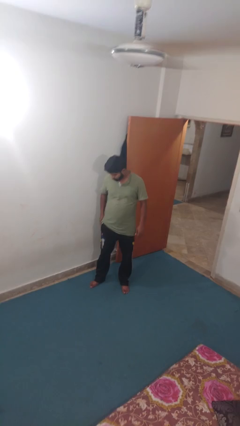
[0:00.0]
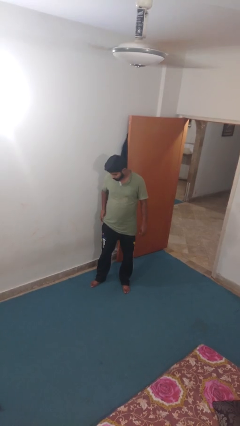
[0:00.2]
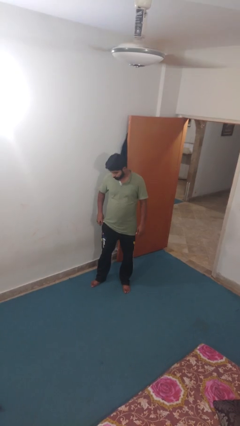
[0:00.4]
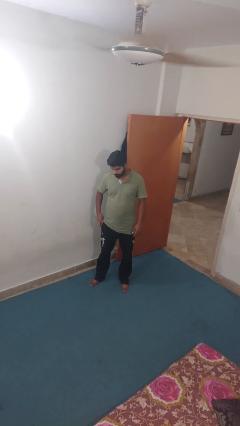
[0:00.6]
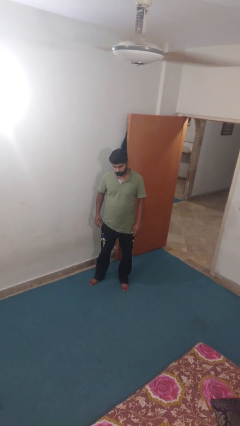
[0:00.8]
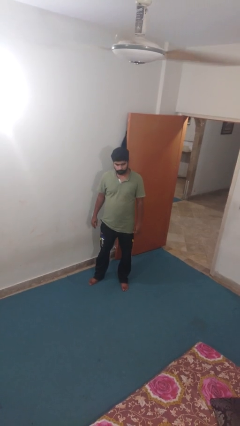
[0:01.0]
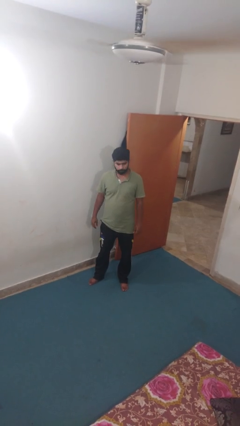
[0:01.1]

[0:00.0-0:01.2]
person puts phone into pocket

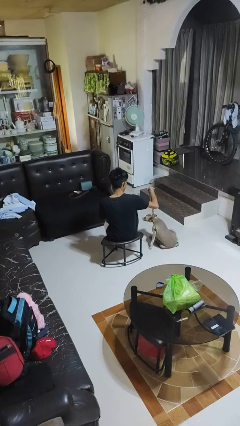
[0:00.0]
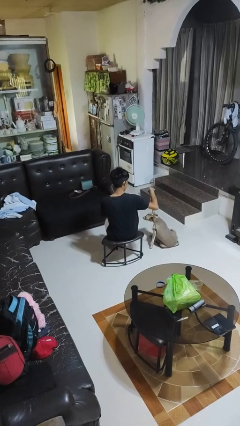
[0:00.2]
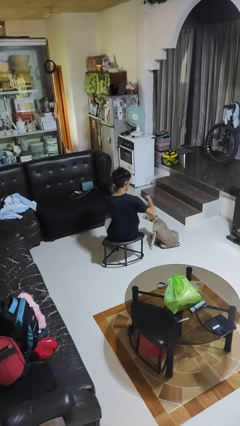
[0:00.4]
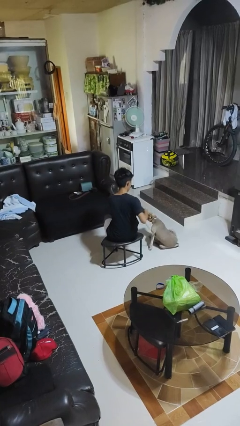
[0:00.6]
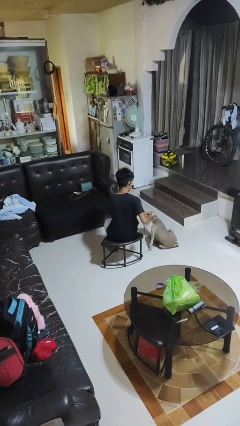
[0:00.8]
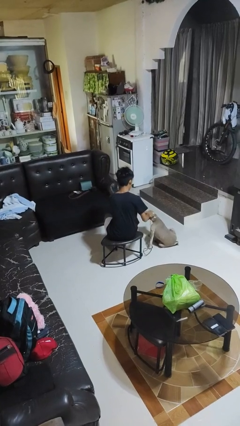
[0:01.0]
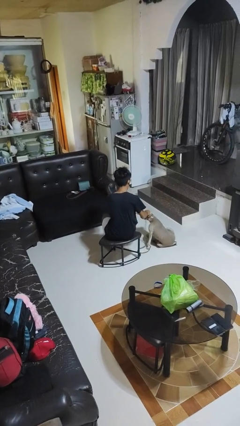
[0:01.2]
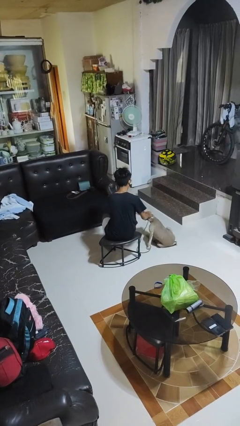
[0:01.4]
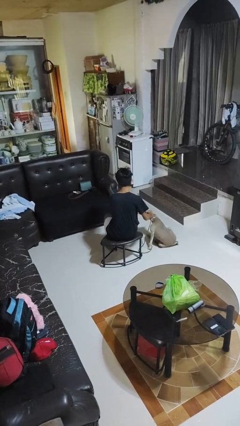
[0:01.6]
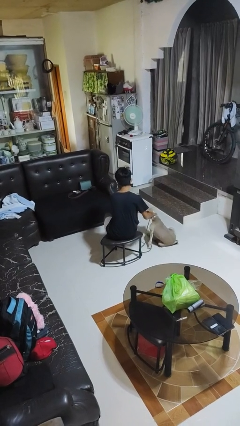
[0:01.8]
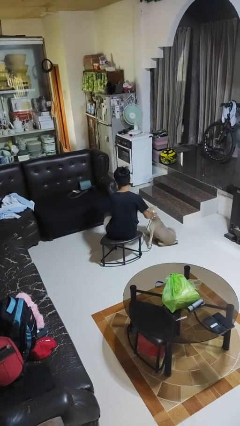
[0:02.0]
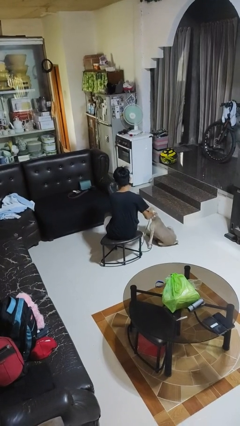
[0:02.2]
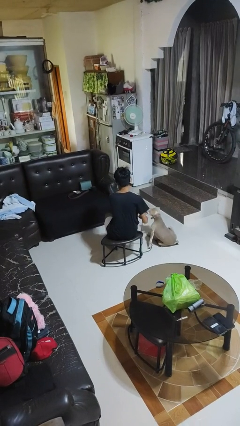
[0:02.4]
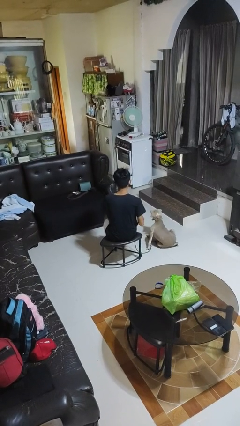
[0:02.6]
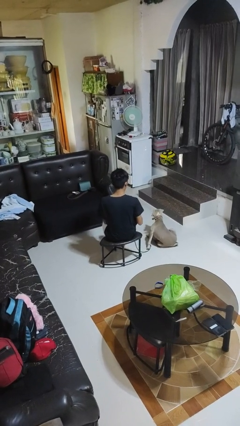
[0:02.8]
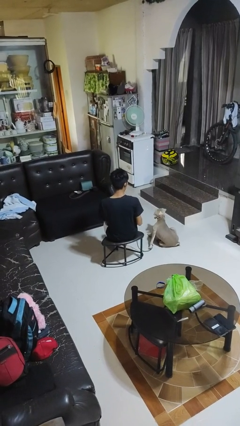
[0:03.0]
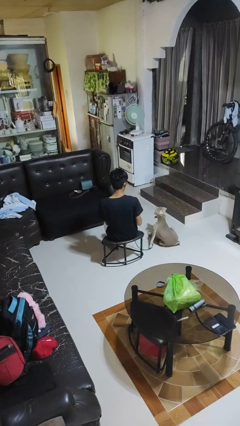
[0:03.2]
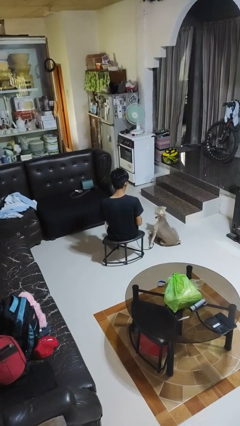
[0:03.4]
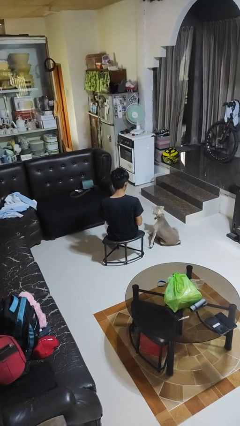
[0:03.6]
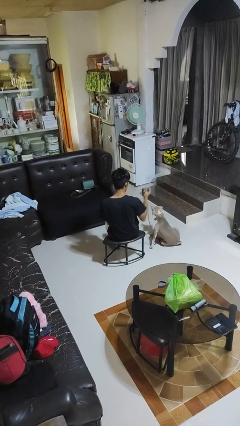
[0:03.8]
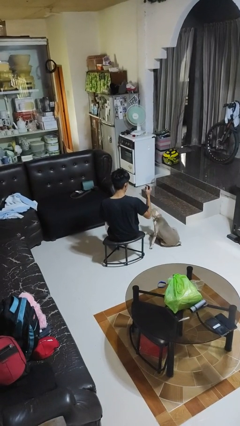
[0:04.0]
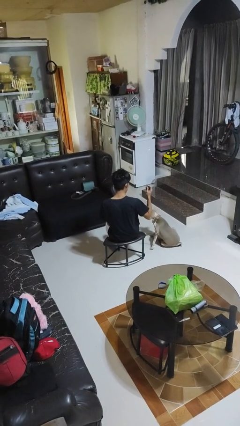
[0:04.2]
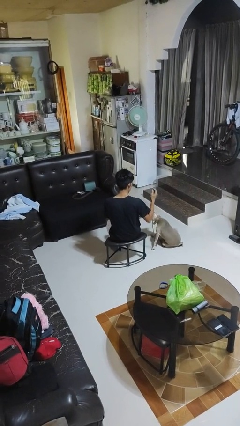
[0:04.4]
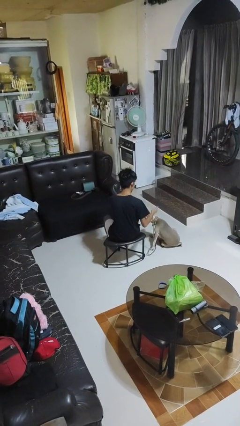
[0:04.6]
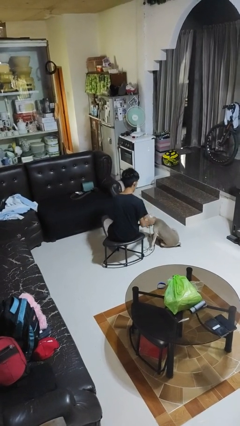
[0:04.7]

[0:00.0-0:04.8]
person unattaches leash from dog

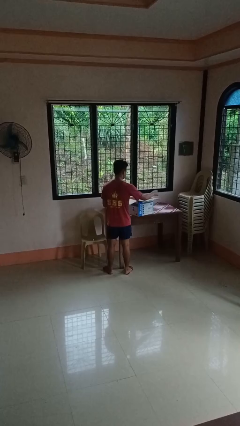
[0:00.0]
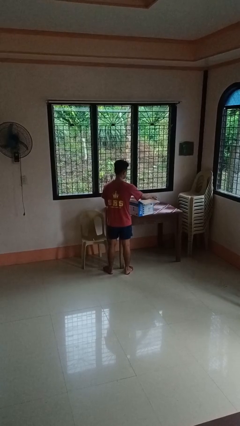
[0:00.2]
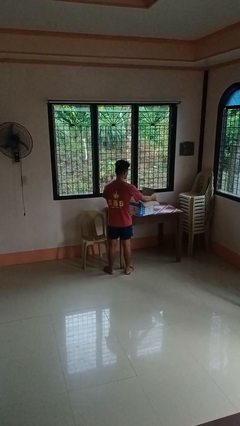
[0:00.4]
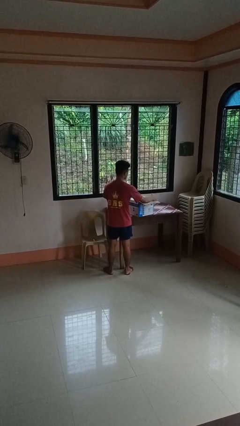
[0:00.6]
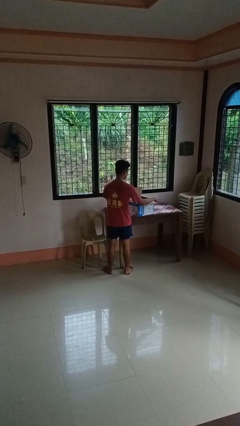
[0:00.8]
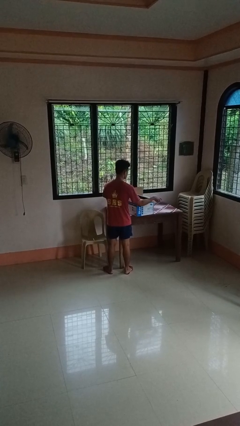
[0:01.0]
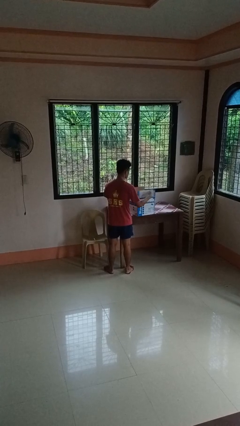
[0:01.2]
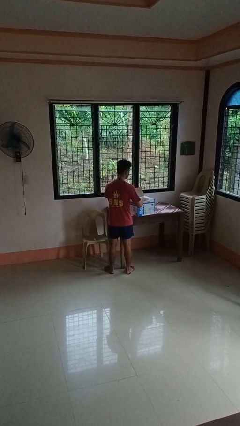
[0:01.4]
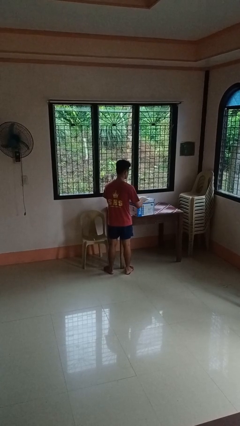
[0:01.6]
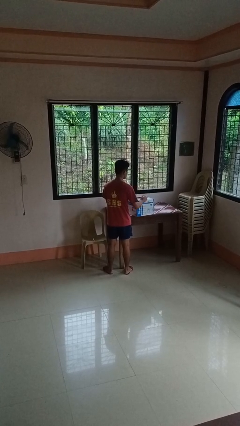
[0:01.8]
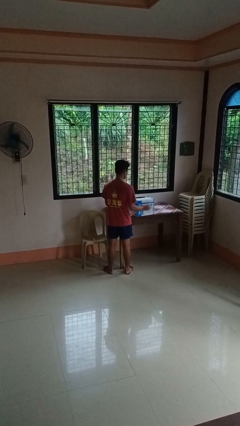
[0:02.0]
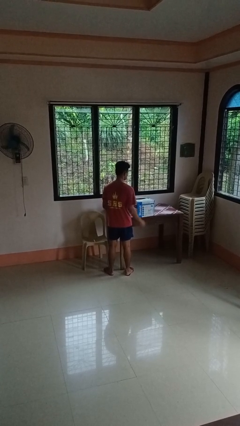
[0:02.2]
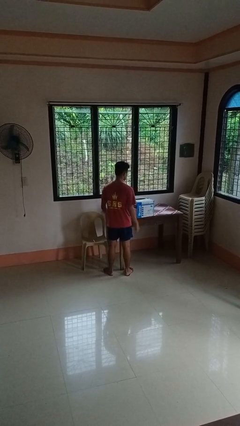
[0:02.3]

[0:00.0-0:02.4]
person closes box

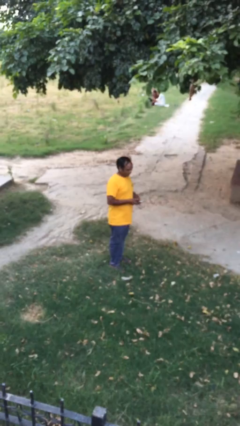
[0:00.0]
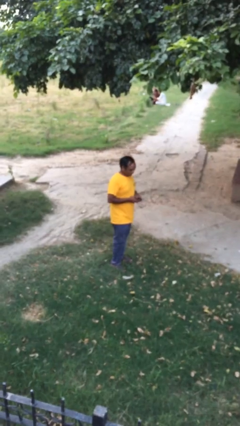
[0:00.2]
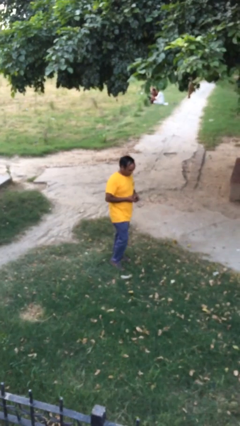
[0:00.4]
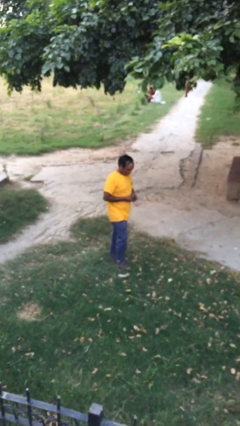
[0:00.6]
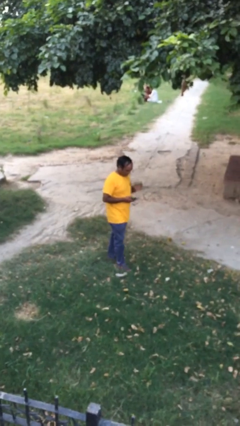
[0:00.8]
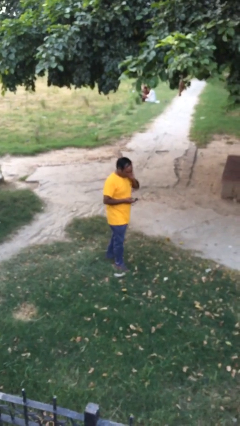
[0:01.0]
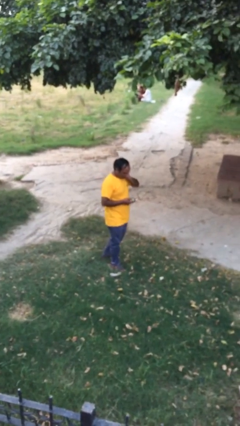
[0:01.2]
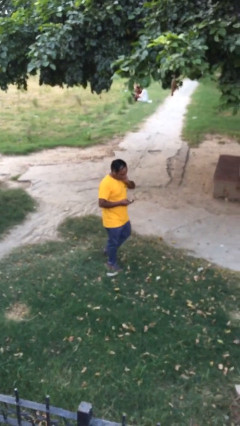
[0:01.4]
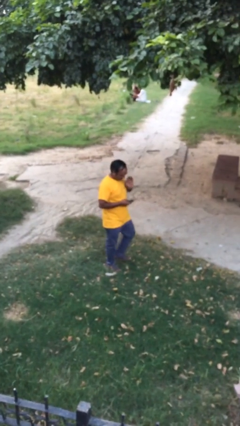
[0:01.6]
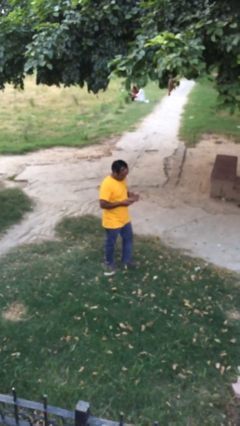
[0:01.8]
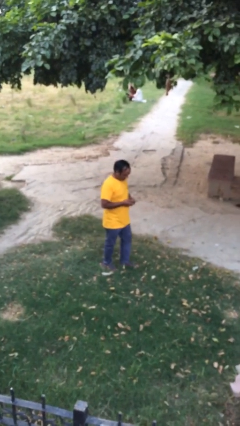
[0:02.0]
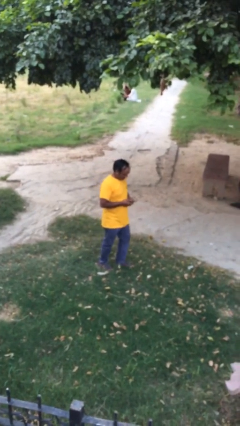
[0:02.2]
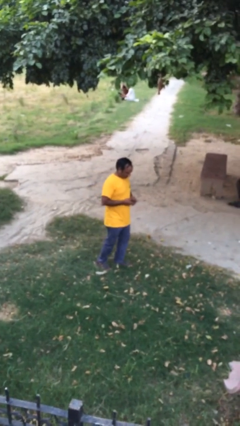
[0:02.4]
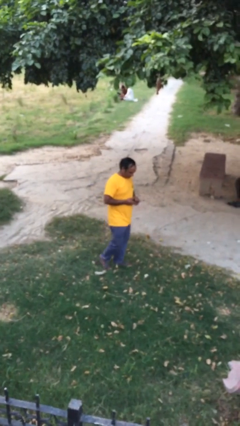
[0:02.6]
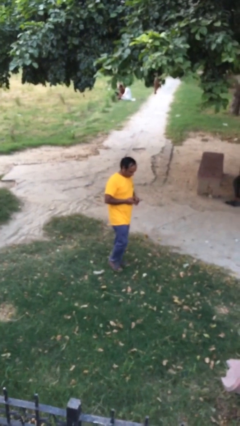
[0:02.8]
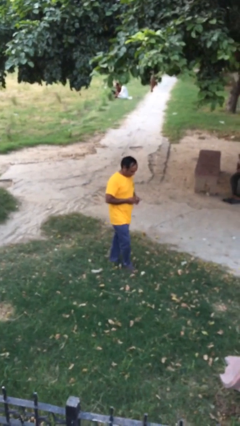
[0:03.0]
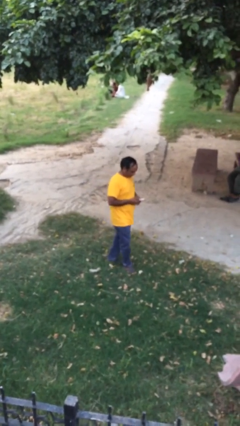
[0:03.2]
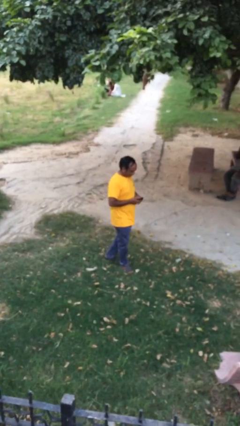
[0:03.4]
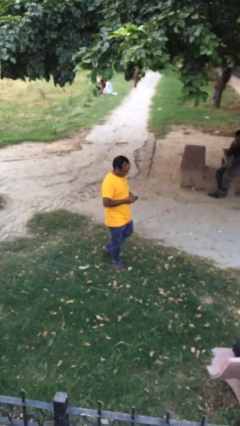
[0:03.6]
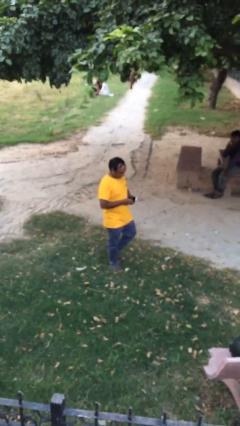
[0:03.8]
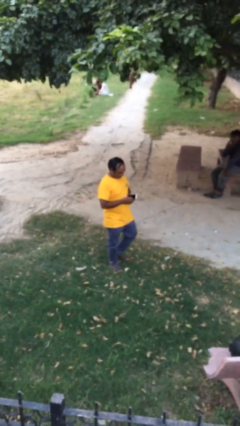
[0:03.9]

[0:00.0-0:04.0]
person texts on phone

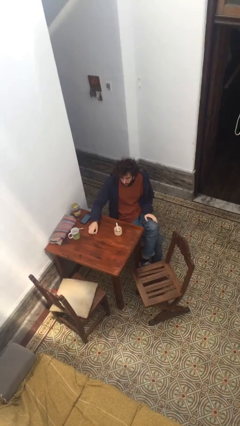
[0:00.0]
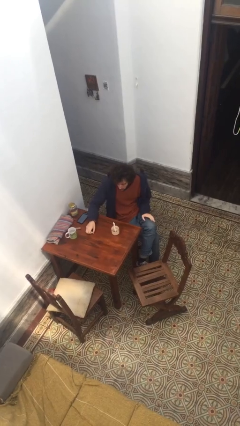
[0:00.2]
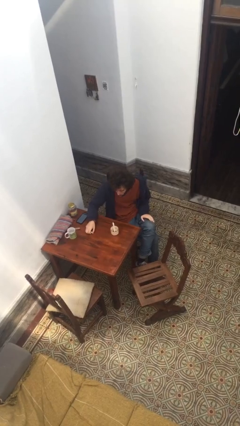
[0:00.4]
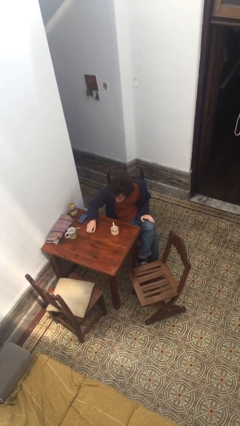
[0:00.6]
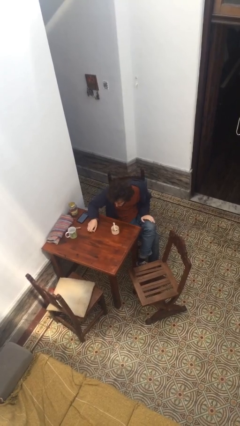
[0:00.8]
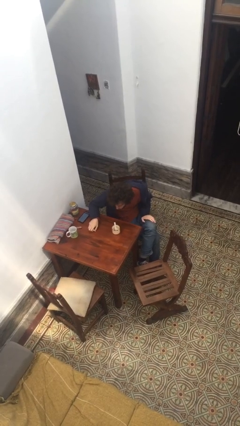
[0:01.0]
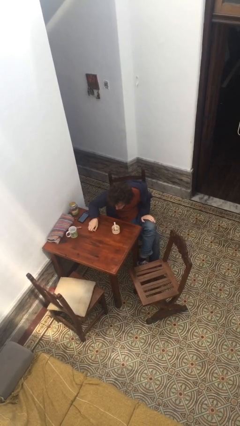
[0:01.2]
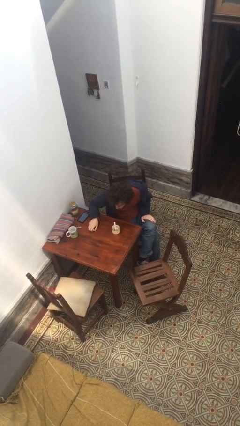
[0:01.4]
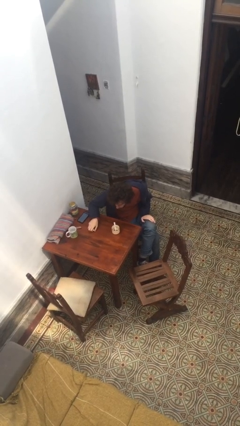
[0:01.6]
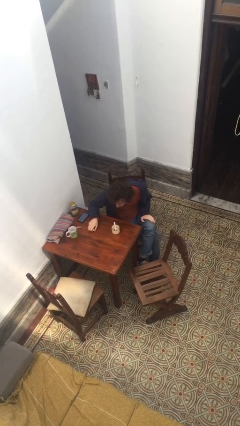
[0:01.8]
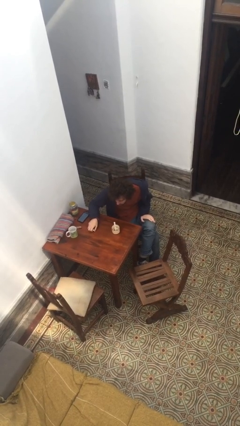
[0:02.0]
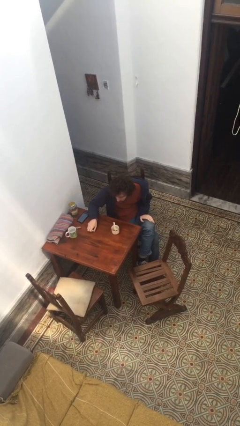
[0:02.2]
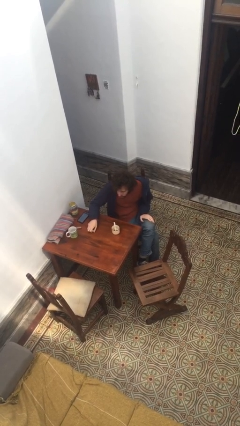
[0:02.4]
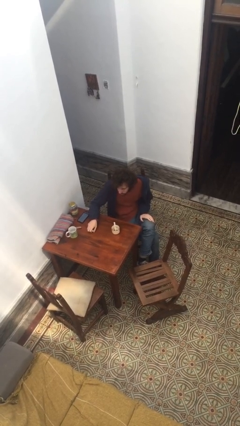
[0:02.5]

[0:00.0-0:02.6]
person extinguishes candle

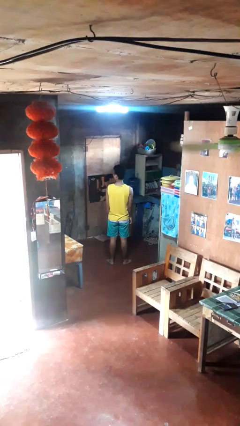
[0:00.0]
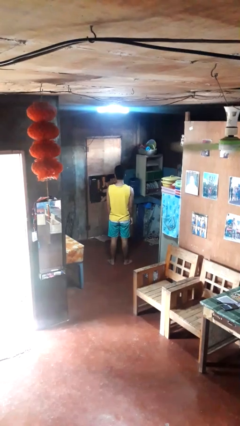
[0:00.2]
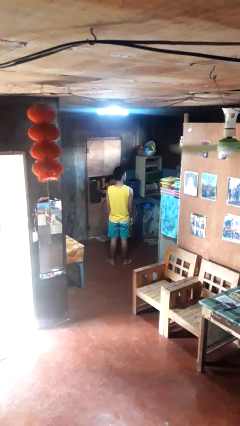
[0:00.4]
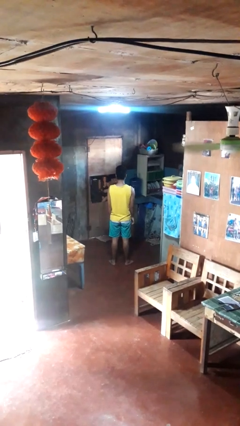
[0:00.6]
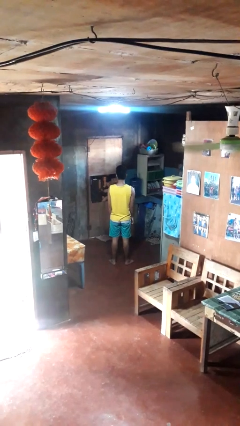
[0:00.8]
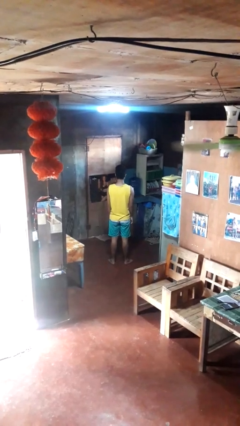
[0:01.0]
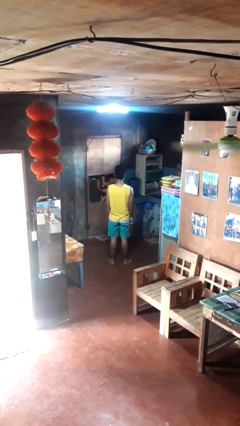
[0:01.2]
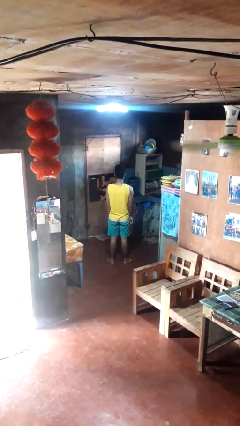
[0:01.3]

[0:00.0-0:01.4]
person shakes head

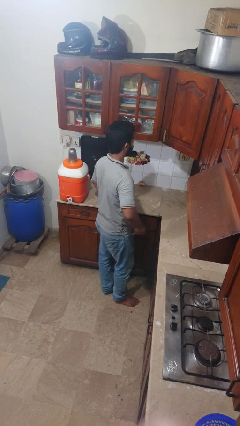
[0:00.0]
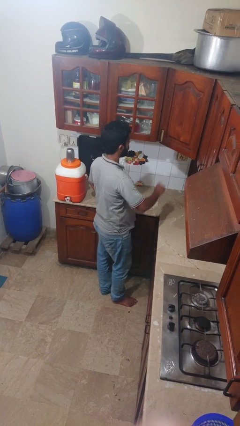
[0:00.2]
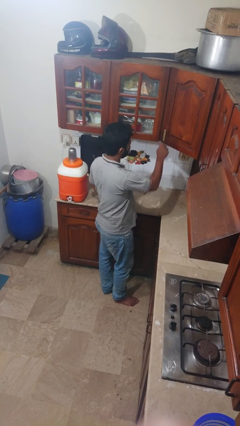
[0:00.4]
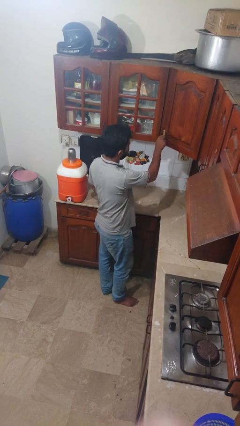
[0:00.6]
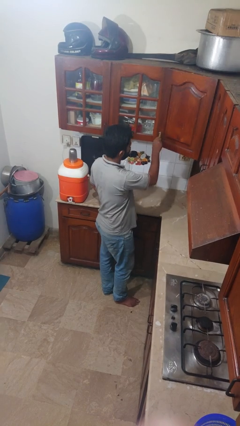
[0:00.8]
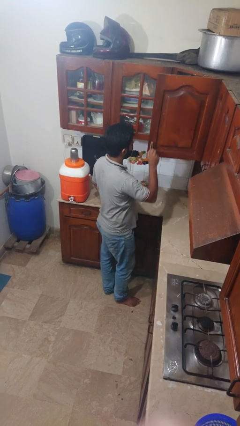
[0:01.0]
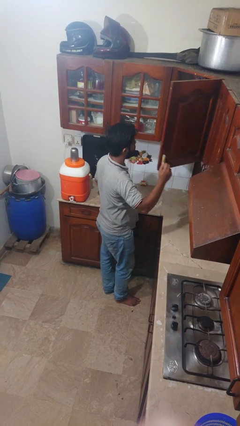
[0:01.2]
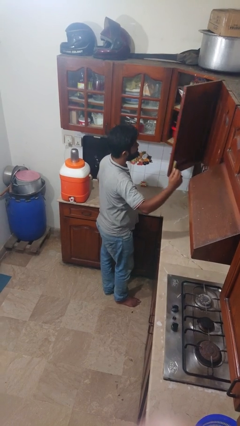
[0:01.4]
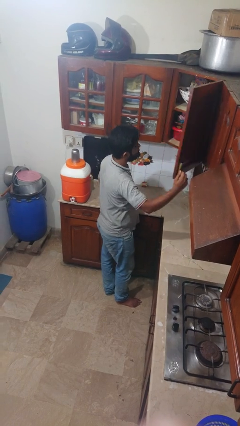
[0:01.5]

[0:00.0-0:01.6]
person closes cabinet
